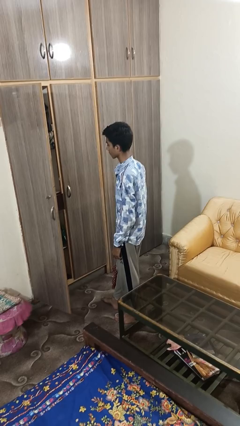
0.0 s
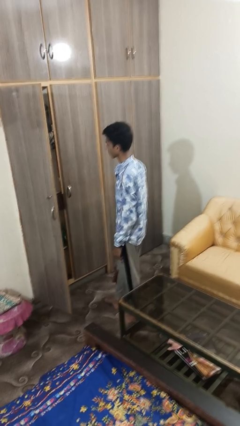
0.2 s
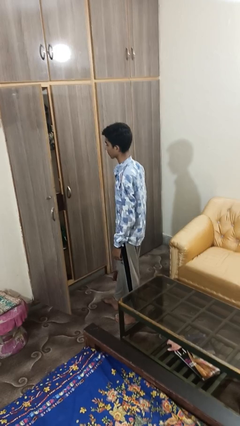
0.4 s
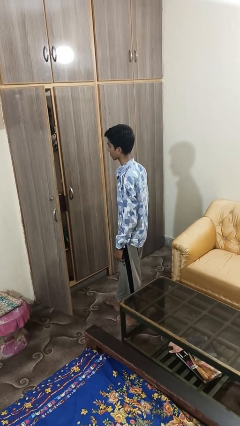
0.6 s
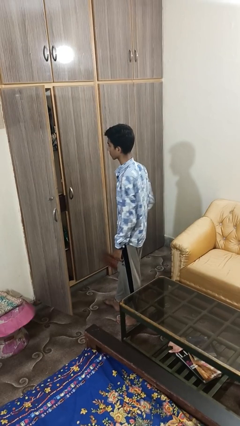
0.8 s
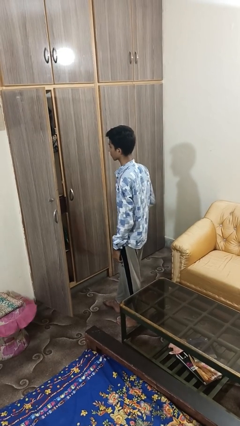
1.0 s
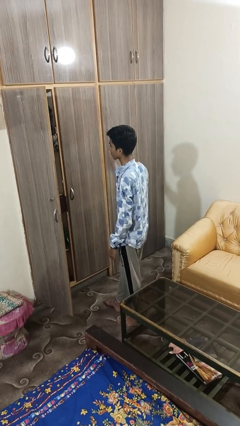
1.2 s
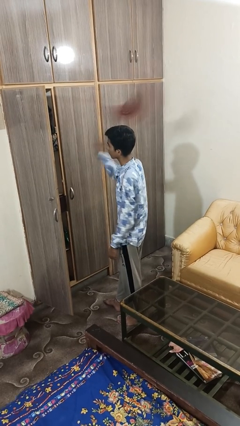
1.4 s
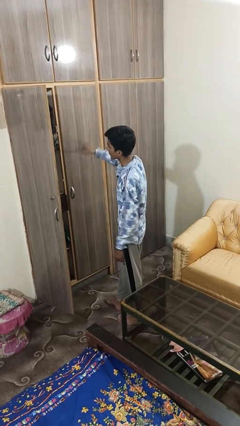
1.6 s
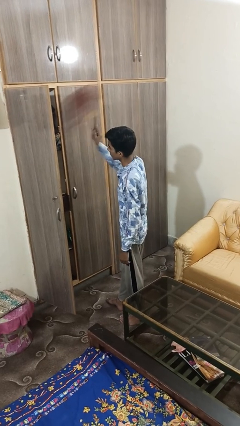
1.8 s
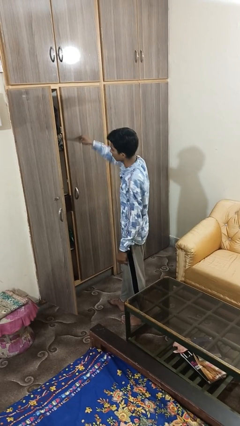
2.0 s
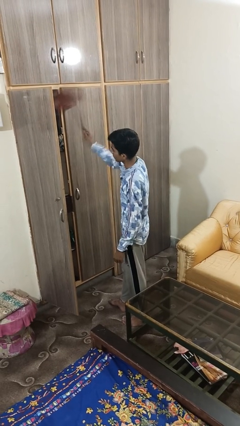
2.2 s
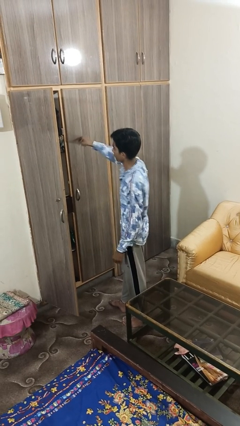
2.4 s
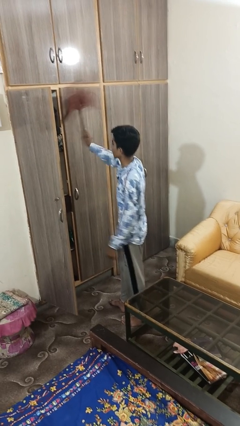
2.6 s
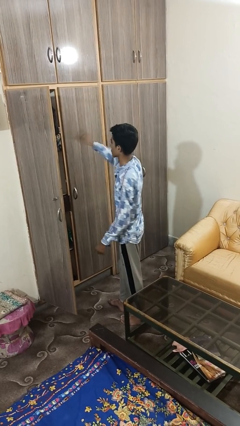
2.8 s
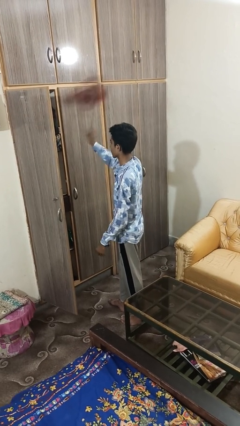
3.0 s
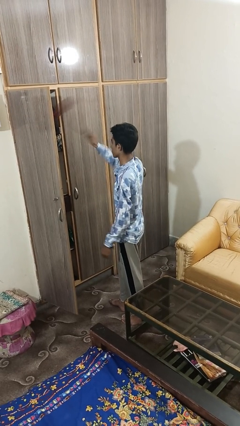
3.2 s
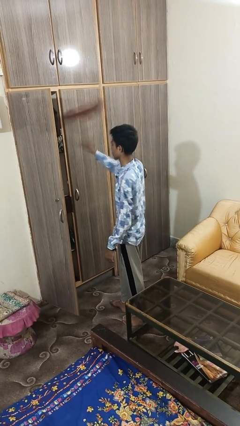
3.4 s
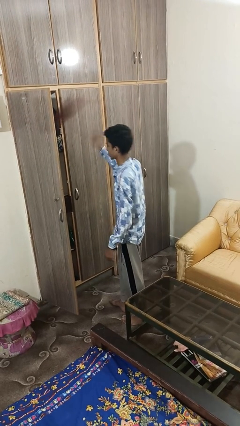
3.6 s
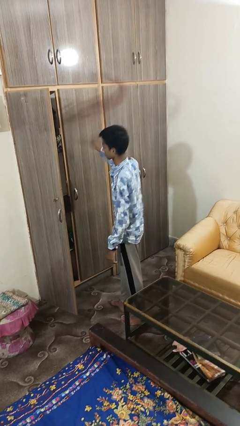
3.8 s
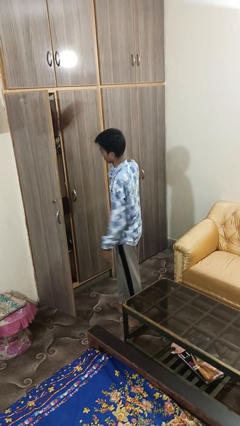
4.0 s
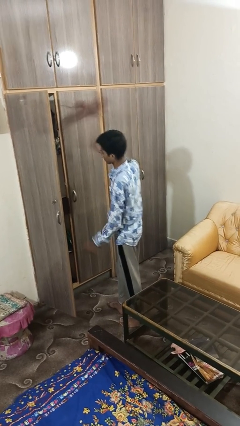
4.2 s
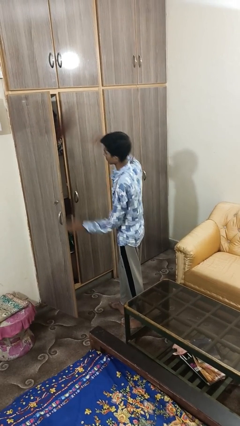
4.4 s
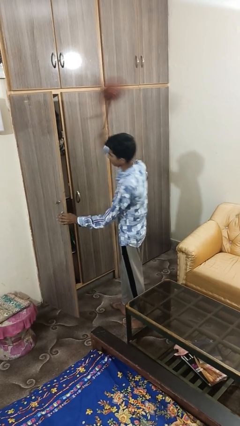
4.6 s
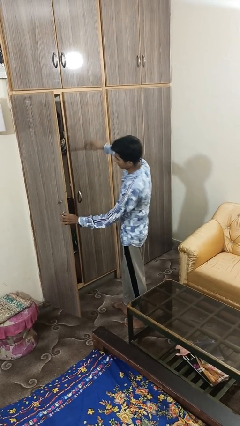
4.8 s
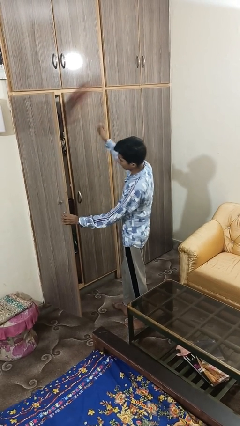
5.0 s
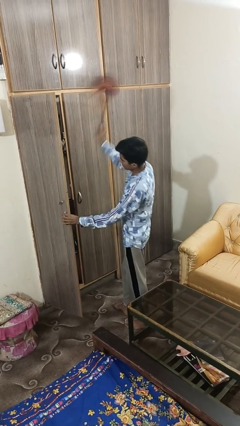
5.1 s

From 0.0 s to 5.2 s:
person dusts furniture

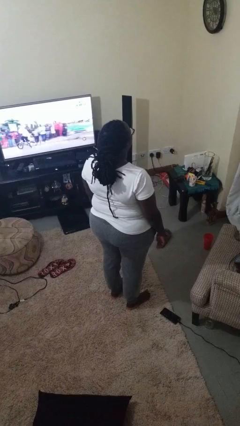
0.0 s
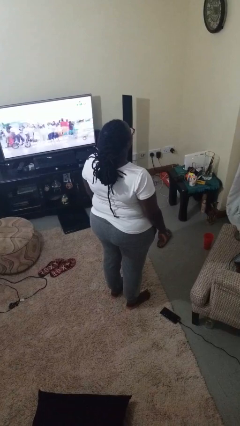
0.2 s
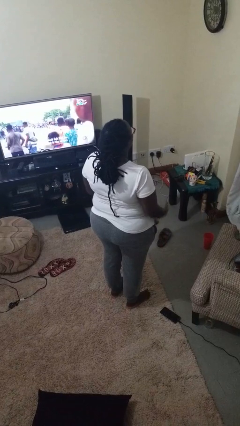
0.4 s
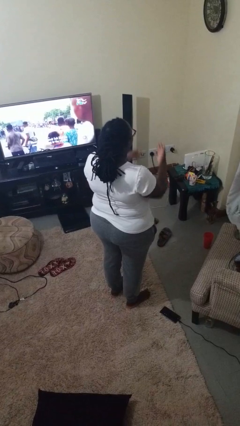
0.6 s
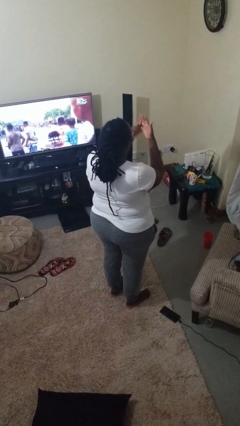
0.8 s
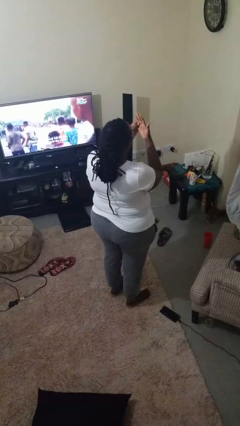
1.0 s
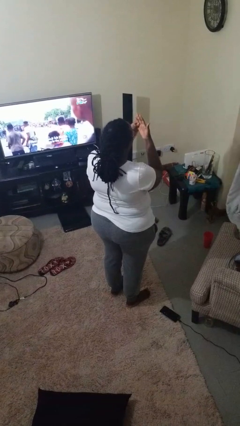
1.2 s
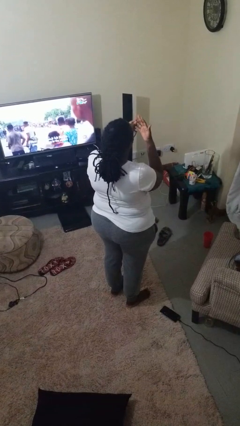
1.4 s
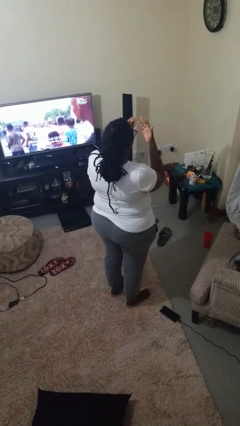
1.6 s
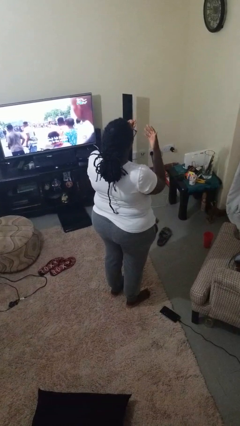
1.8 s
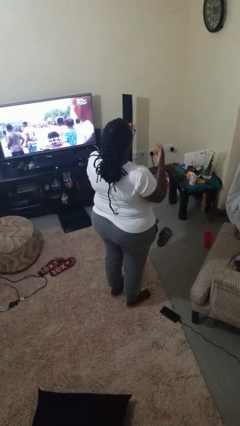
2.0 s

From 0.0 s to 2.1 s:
person takes off ring

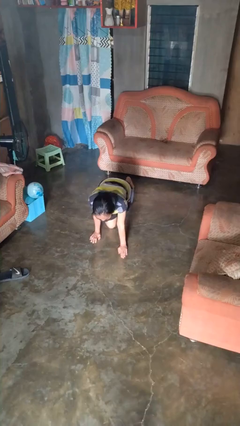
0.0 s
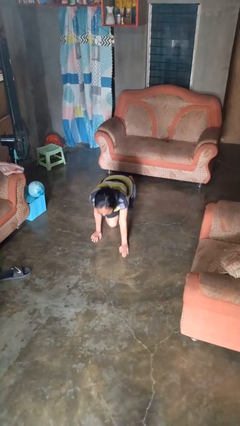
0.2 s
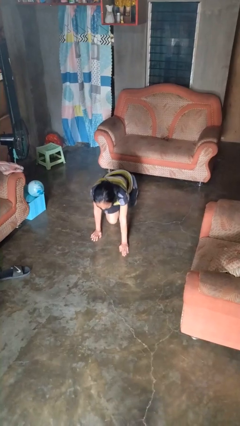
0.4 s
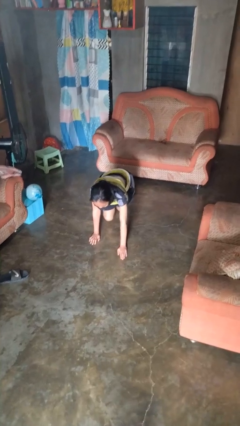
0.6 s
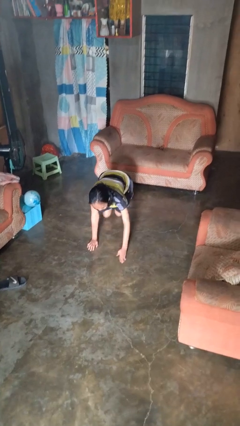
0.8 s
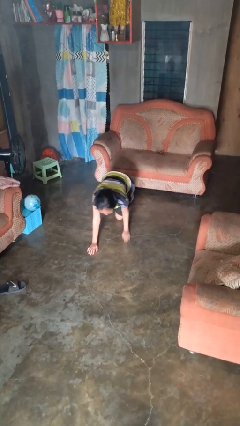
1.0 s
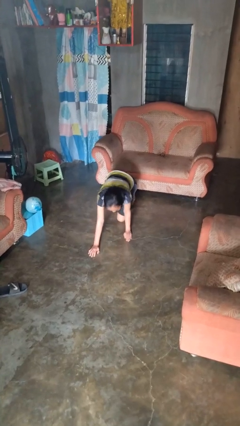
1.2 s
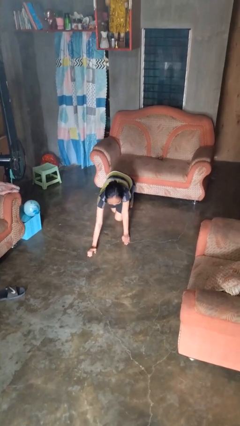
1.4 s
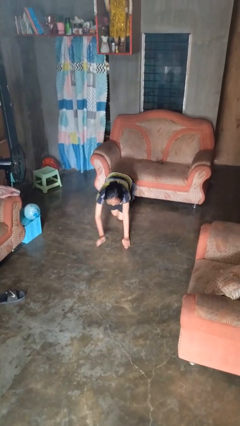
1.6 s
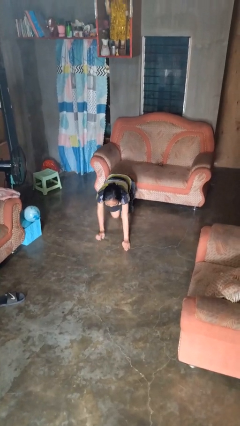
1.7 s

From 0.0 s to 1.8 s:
person crawls

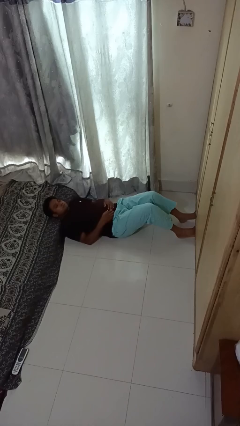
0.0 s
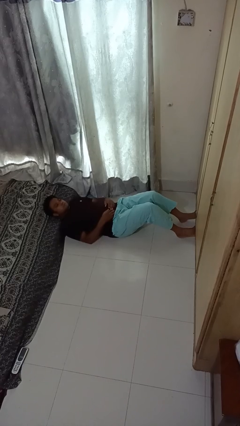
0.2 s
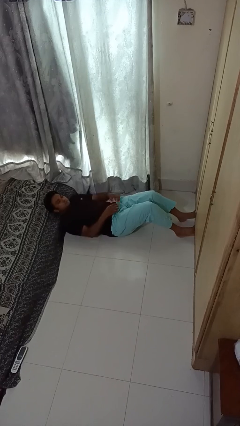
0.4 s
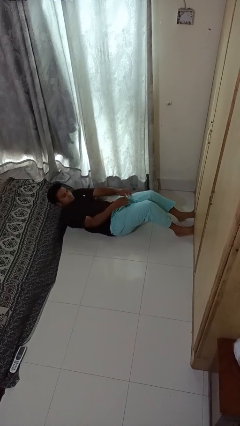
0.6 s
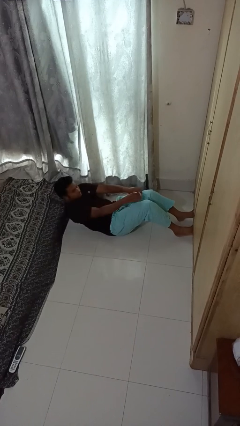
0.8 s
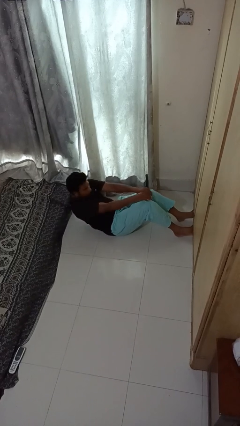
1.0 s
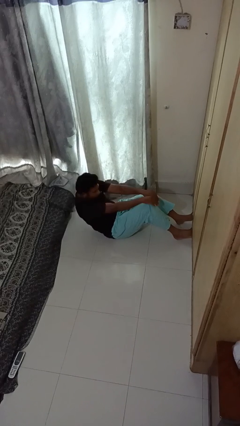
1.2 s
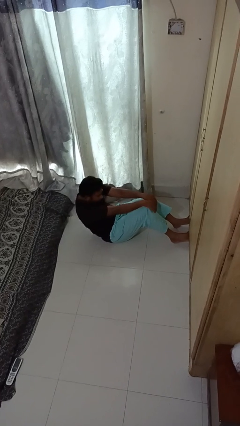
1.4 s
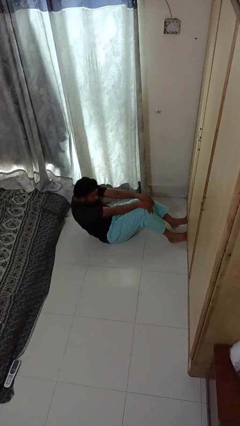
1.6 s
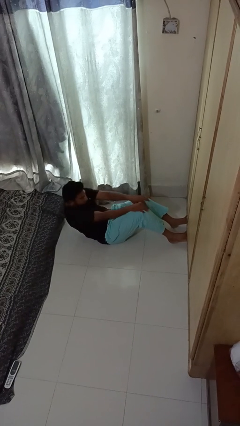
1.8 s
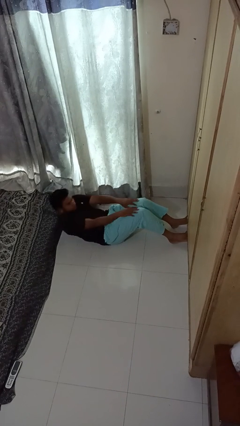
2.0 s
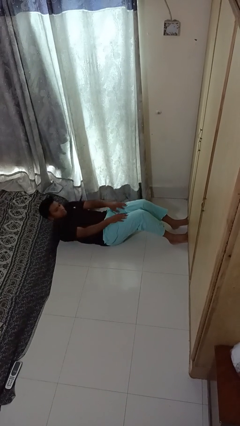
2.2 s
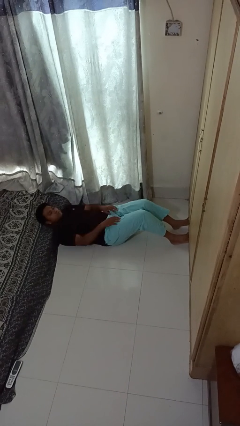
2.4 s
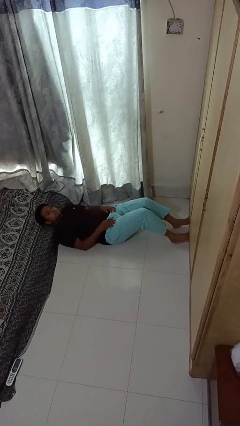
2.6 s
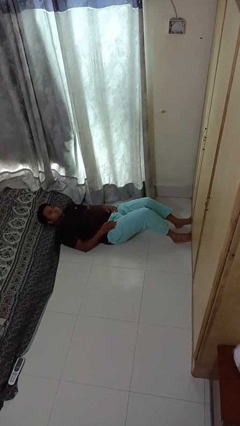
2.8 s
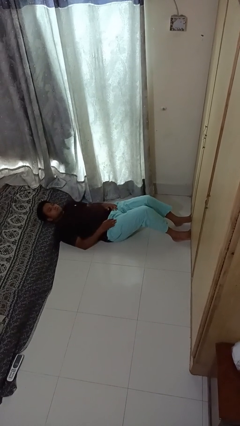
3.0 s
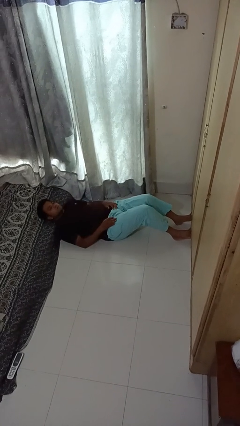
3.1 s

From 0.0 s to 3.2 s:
person exercises with situp

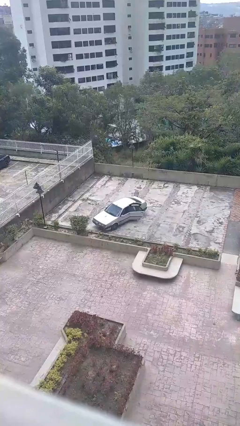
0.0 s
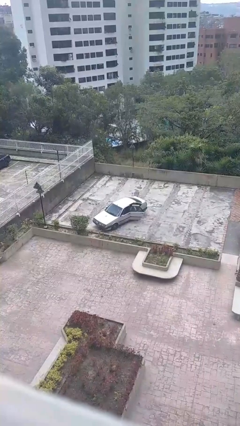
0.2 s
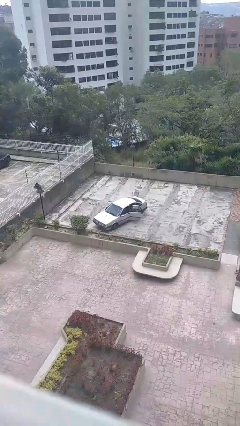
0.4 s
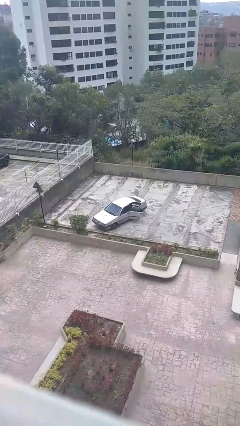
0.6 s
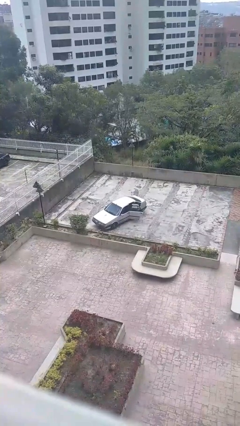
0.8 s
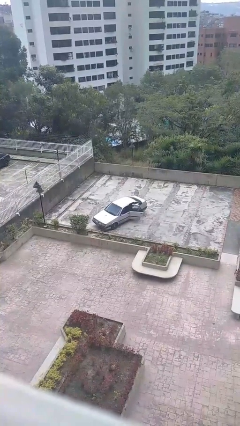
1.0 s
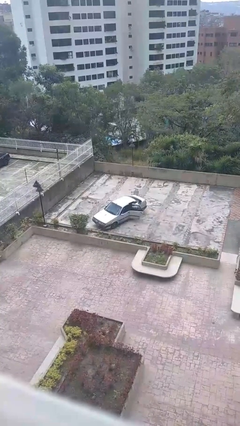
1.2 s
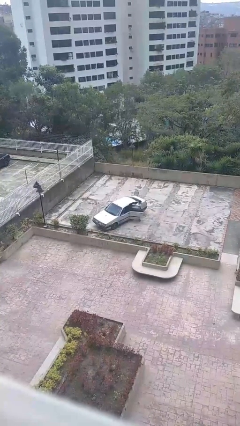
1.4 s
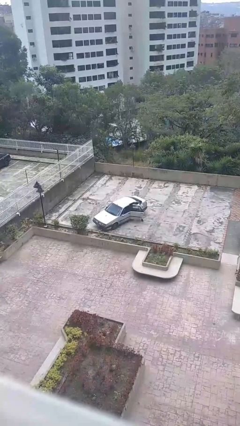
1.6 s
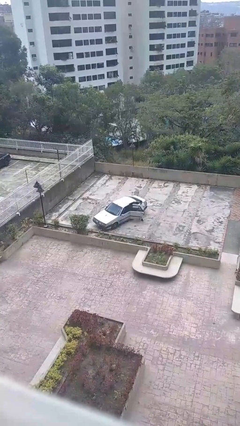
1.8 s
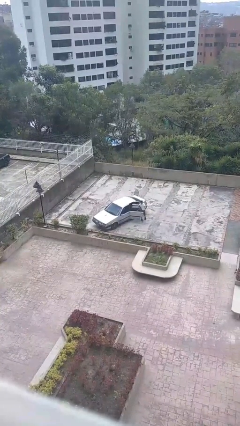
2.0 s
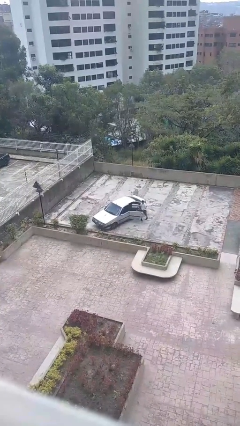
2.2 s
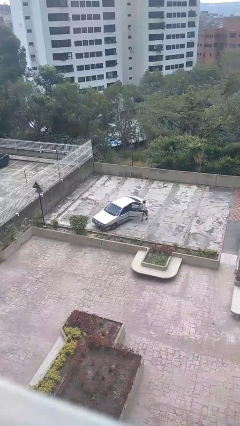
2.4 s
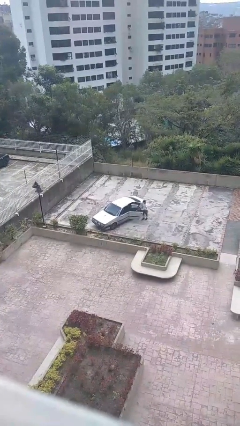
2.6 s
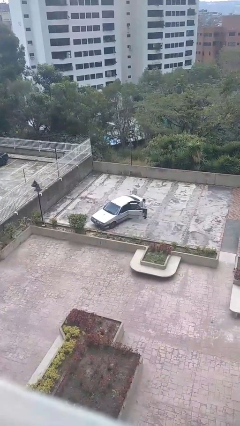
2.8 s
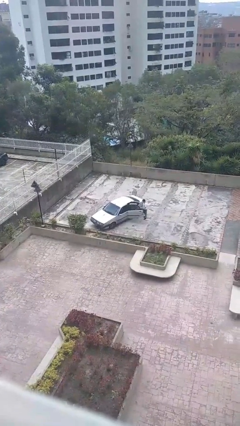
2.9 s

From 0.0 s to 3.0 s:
car drops off person

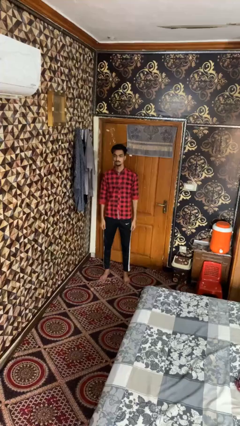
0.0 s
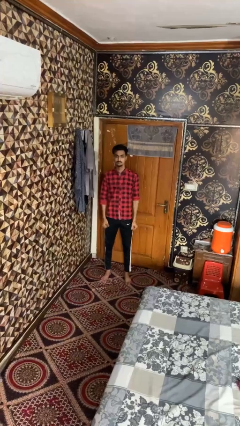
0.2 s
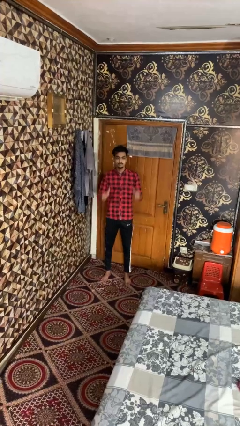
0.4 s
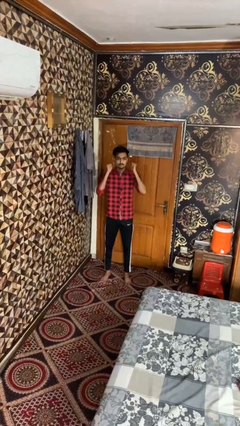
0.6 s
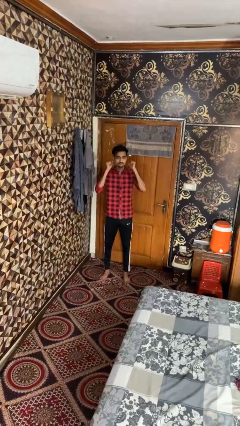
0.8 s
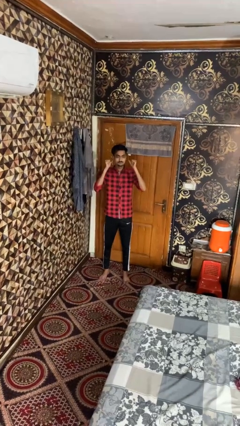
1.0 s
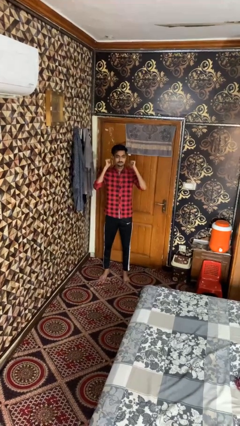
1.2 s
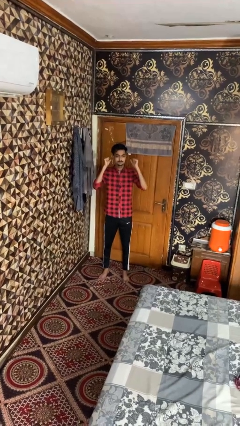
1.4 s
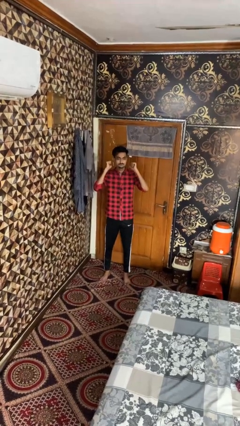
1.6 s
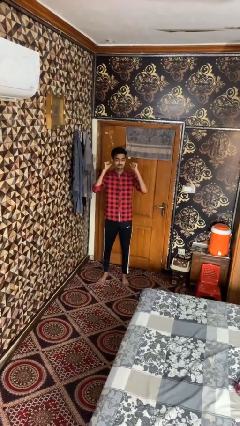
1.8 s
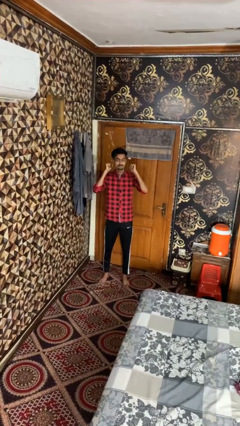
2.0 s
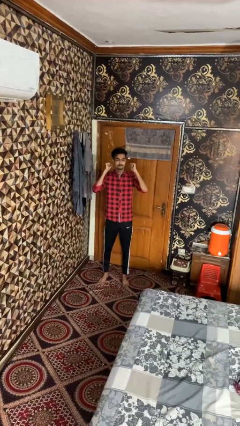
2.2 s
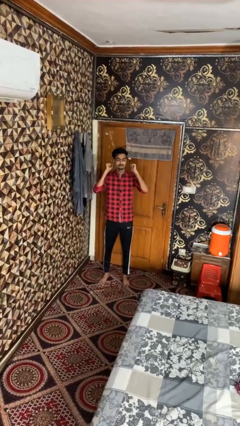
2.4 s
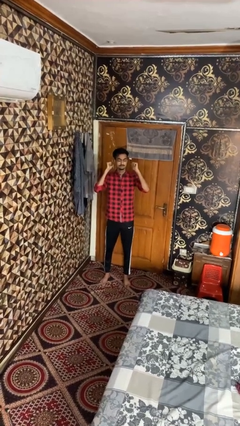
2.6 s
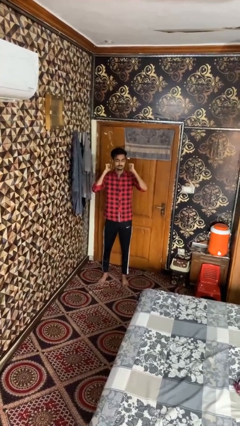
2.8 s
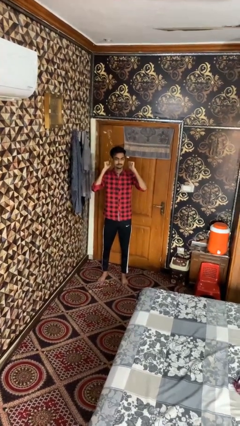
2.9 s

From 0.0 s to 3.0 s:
person gestures behind me
